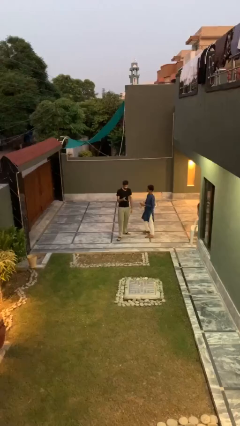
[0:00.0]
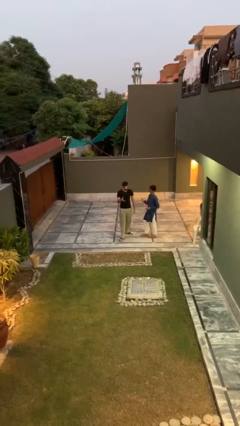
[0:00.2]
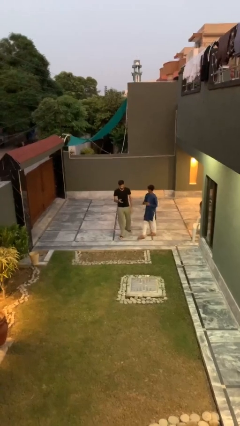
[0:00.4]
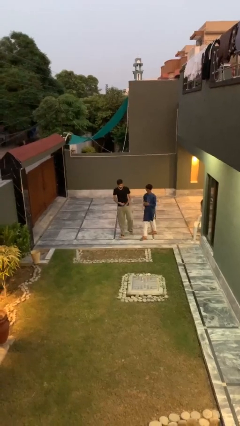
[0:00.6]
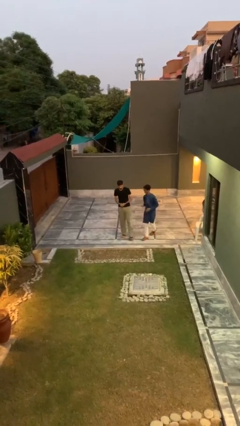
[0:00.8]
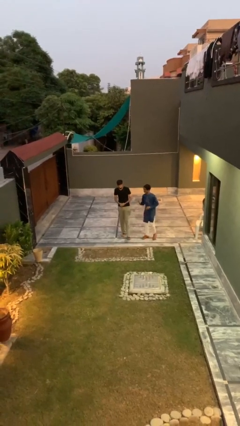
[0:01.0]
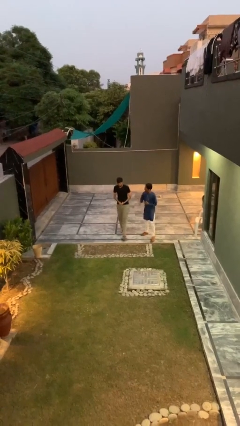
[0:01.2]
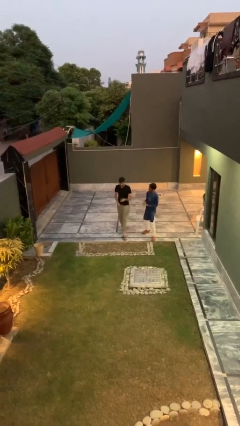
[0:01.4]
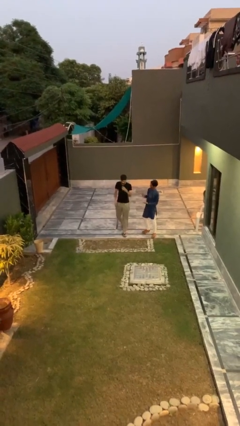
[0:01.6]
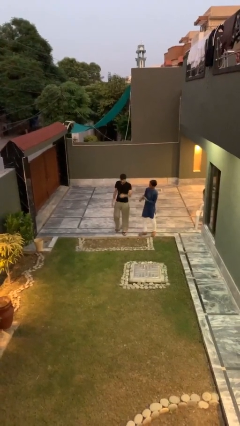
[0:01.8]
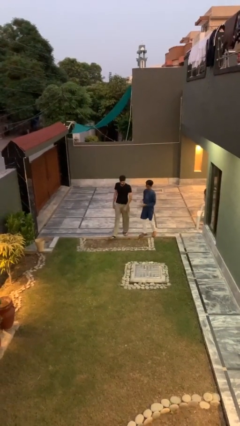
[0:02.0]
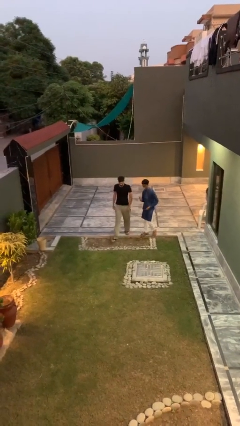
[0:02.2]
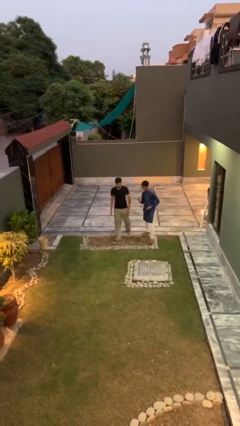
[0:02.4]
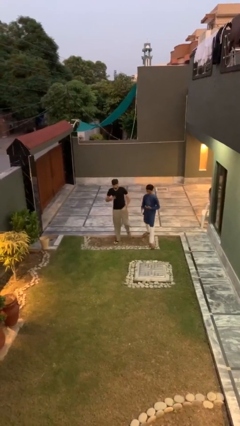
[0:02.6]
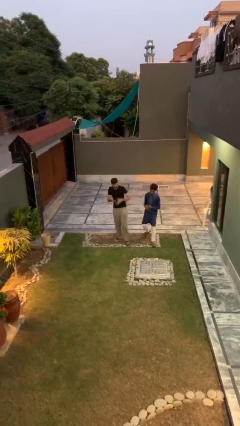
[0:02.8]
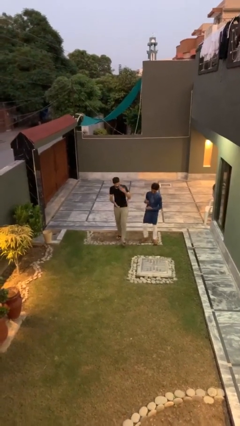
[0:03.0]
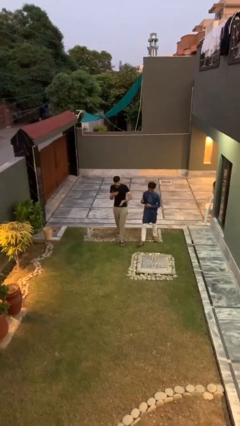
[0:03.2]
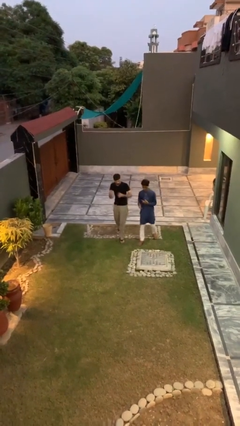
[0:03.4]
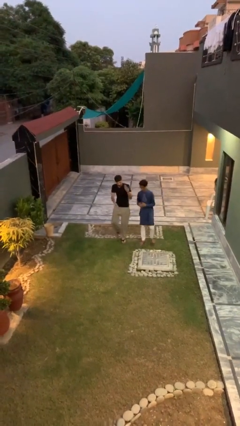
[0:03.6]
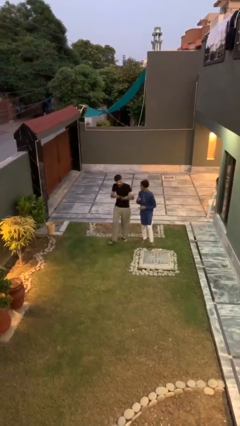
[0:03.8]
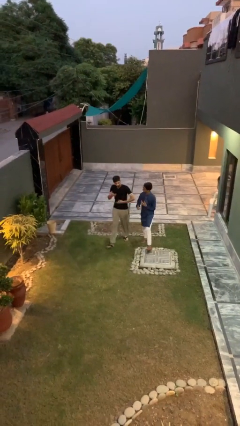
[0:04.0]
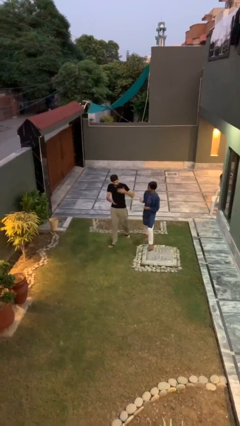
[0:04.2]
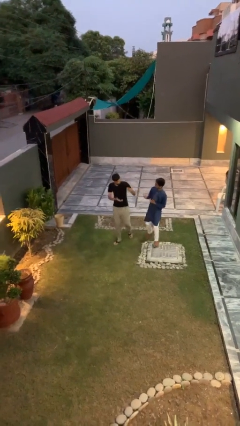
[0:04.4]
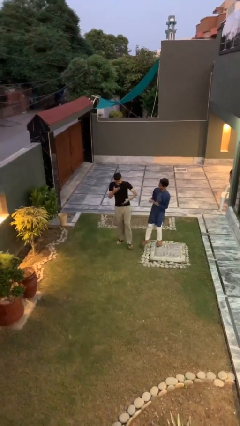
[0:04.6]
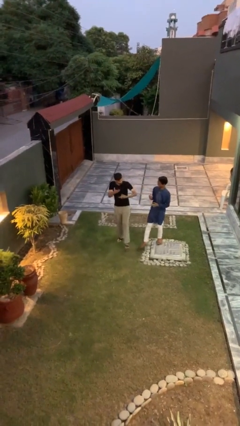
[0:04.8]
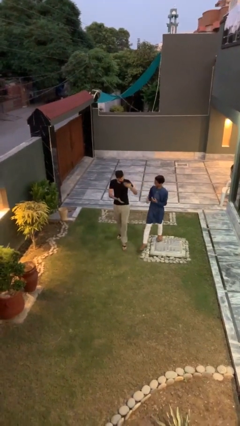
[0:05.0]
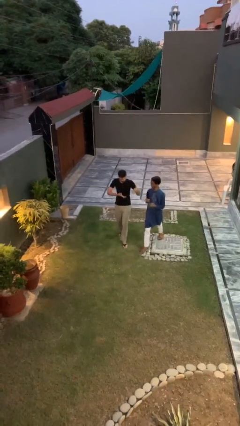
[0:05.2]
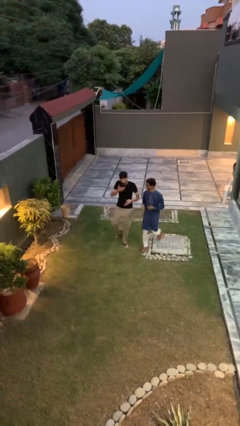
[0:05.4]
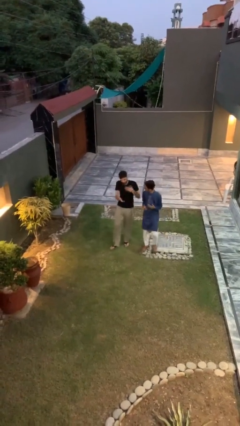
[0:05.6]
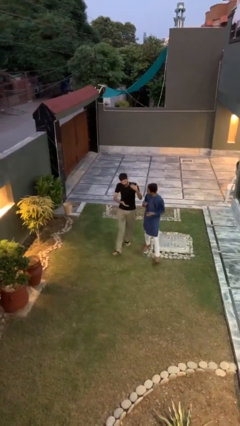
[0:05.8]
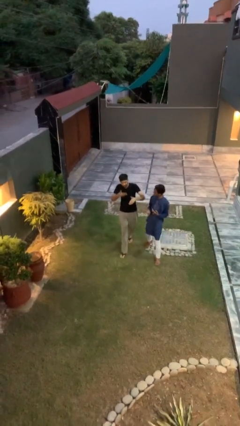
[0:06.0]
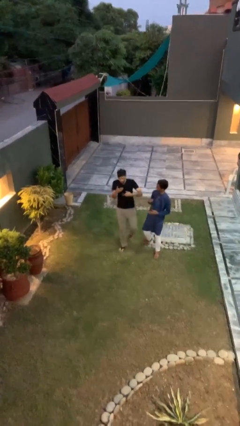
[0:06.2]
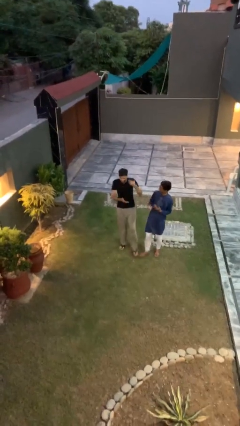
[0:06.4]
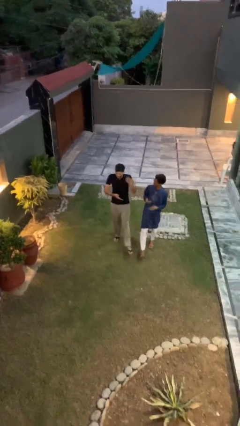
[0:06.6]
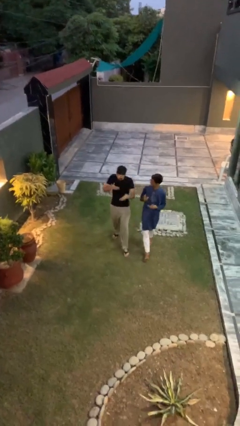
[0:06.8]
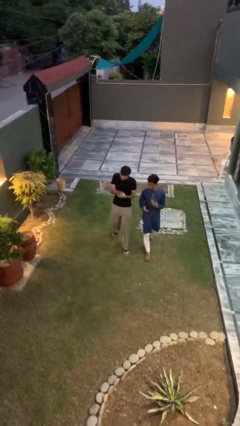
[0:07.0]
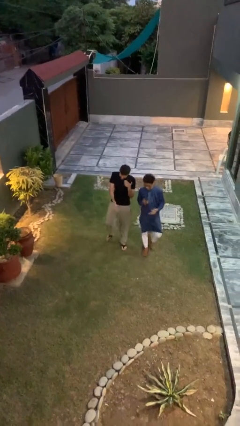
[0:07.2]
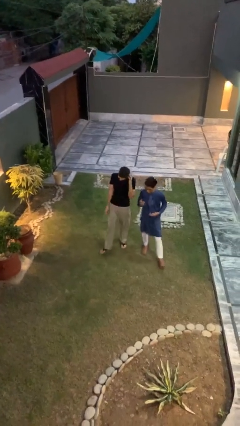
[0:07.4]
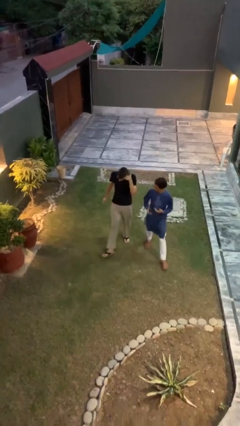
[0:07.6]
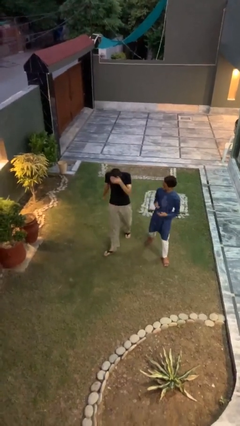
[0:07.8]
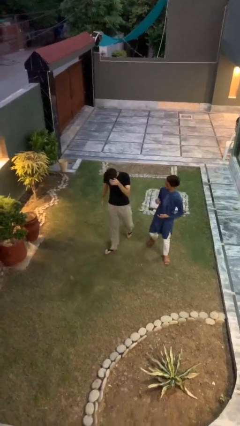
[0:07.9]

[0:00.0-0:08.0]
person talks to person

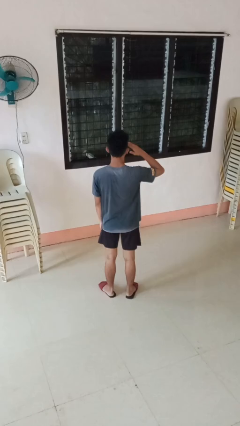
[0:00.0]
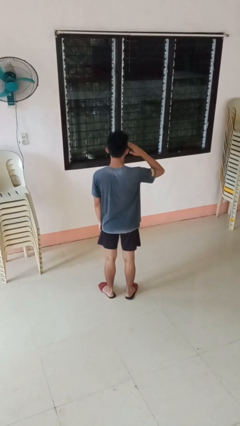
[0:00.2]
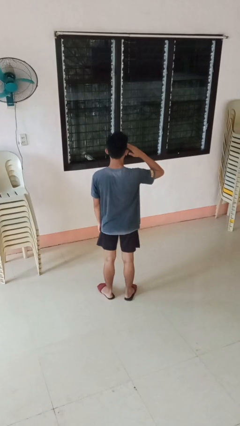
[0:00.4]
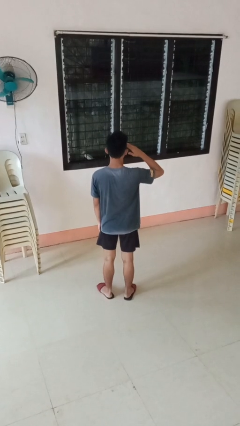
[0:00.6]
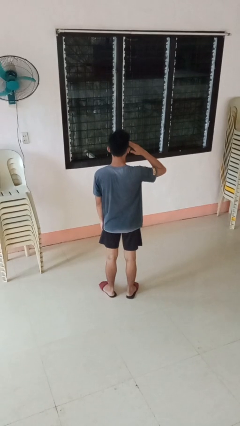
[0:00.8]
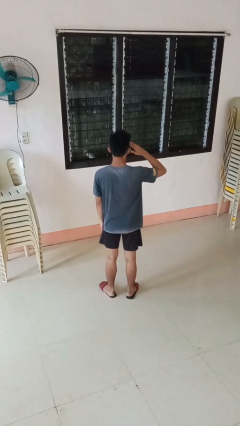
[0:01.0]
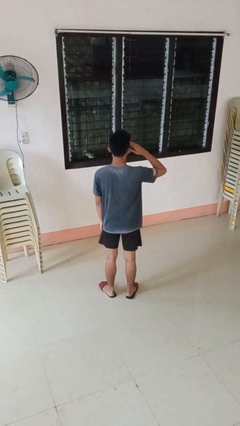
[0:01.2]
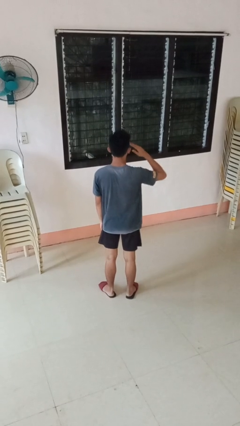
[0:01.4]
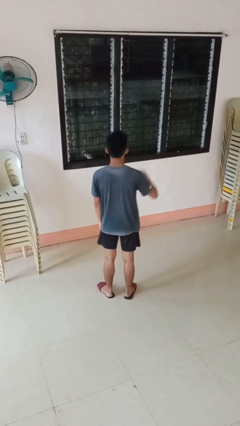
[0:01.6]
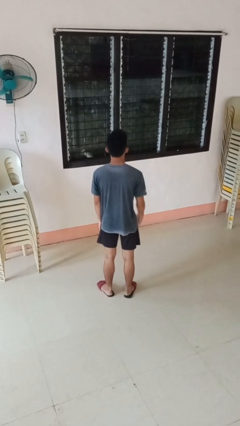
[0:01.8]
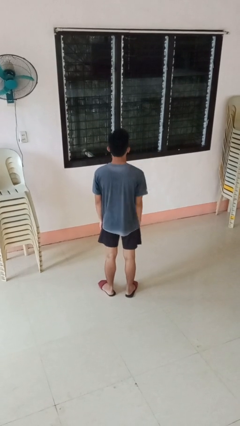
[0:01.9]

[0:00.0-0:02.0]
person salutes

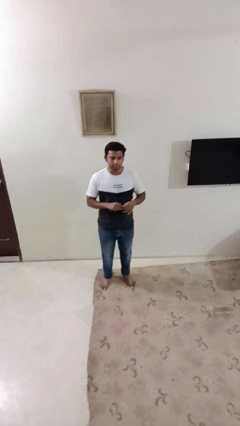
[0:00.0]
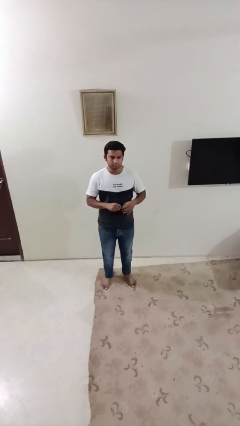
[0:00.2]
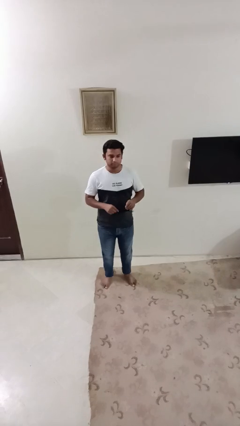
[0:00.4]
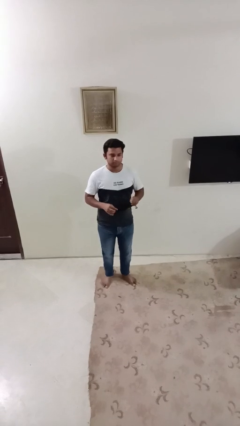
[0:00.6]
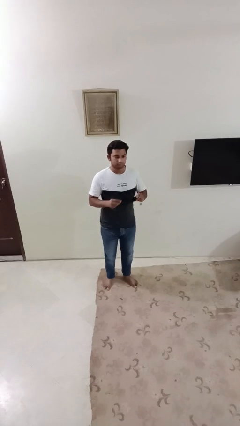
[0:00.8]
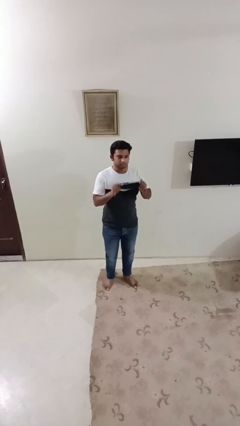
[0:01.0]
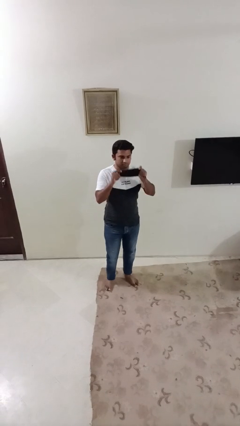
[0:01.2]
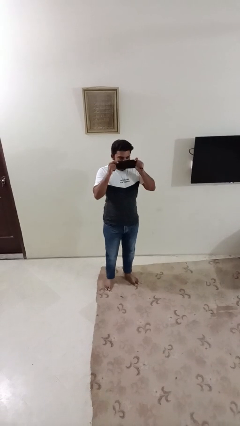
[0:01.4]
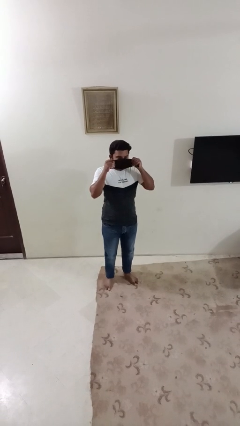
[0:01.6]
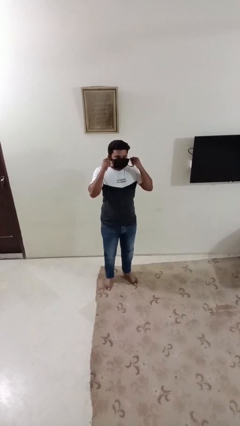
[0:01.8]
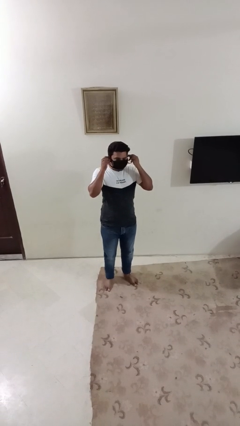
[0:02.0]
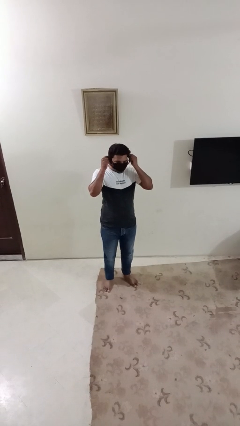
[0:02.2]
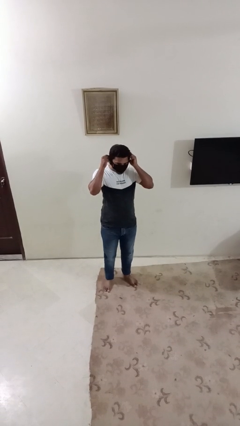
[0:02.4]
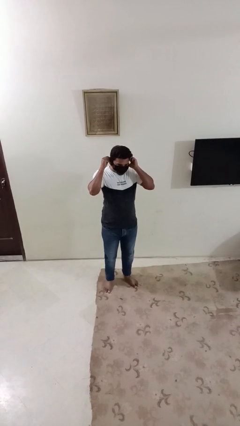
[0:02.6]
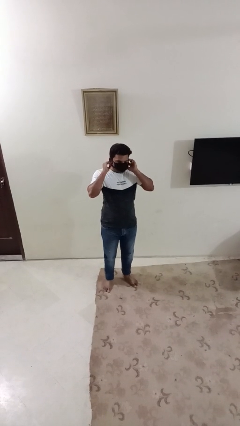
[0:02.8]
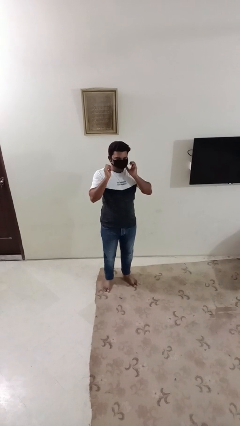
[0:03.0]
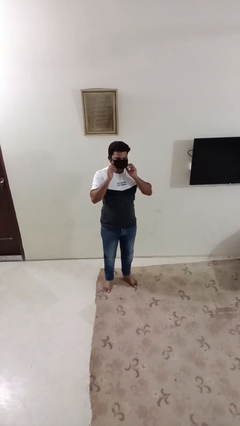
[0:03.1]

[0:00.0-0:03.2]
person puts on facemask

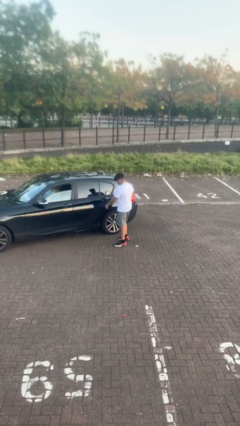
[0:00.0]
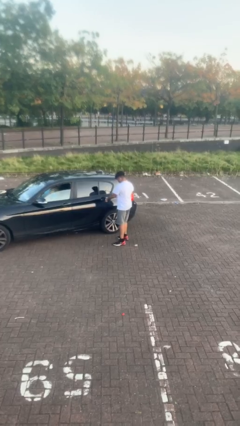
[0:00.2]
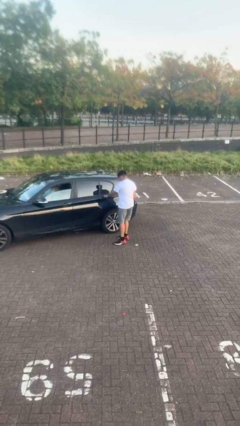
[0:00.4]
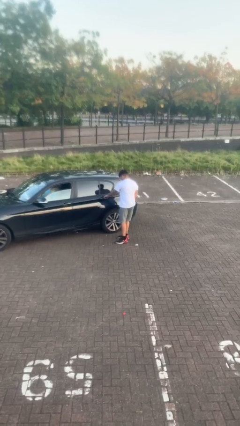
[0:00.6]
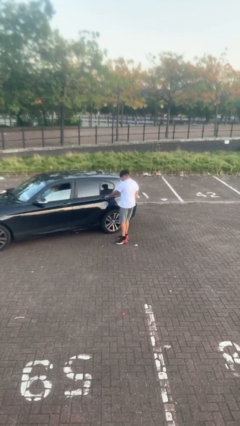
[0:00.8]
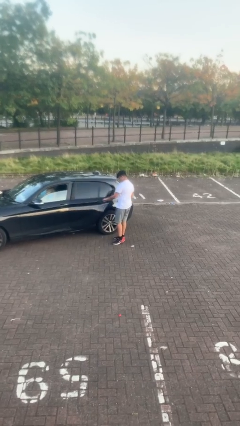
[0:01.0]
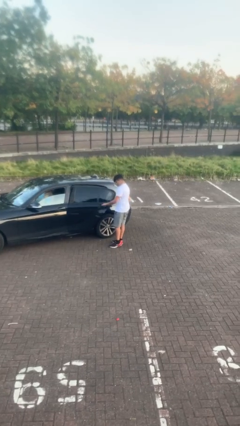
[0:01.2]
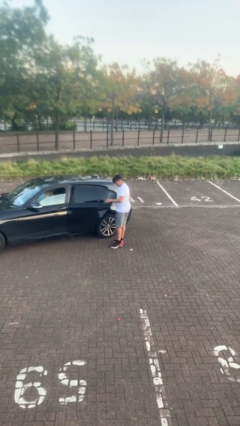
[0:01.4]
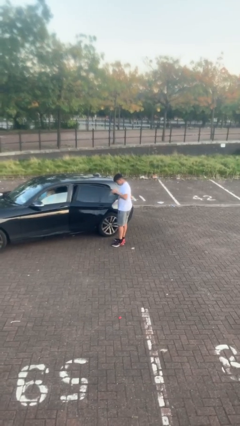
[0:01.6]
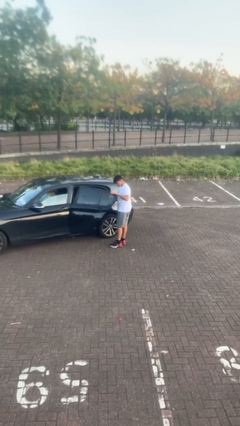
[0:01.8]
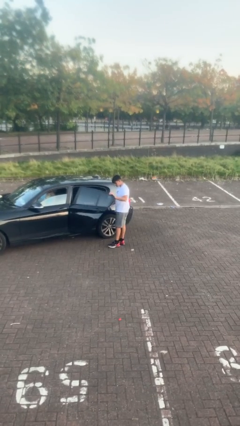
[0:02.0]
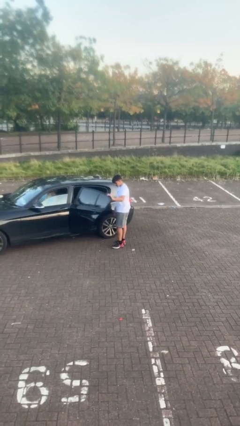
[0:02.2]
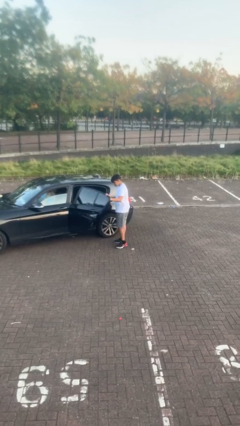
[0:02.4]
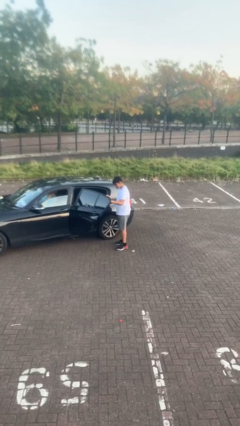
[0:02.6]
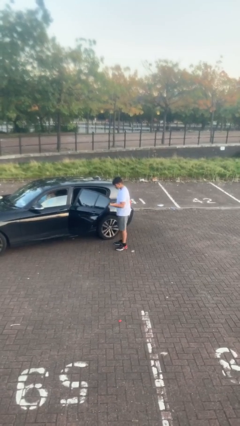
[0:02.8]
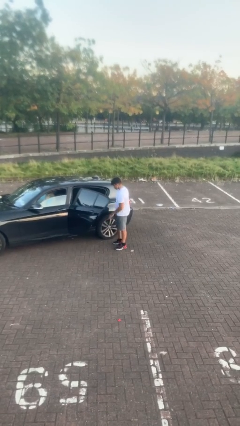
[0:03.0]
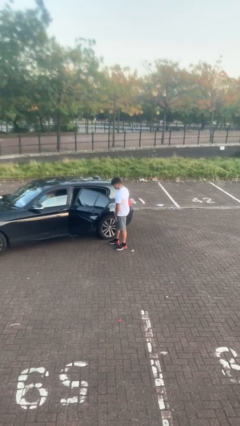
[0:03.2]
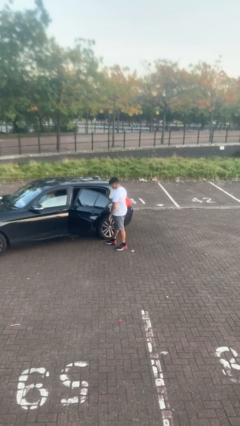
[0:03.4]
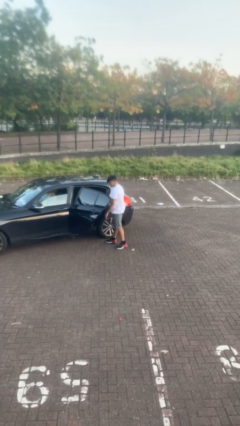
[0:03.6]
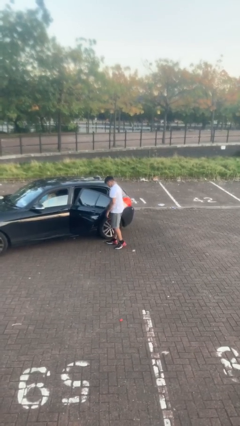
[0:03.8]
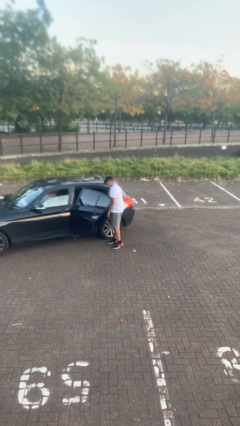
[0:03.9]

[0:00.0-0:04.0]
person opens car door

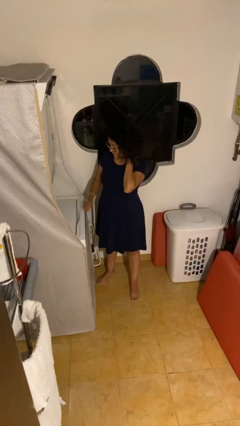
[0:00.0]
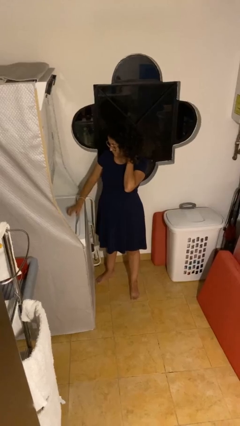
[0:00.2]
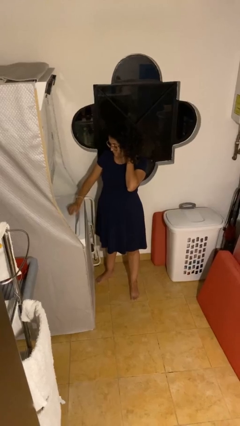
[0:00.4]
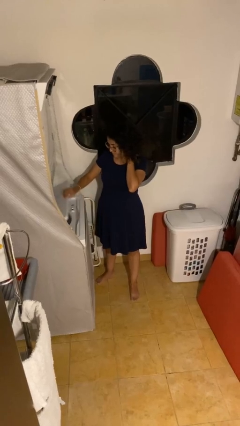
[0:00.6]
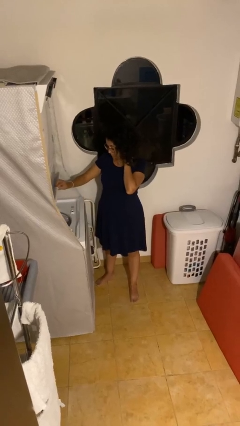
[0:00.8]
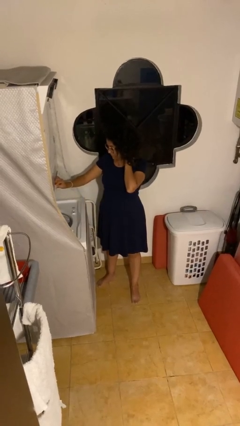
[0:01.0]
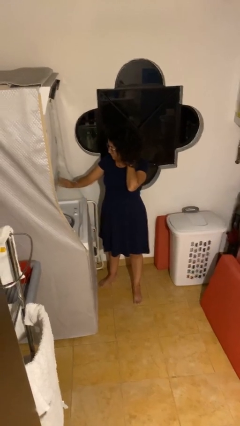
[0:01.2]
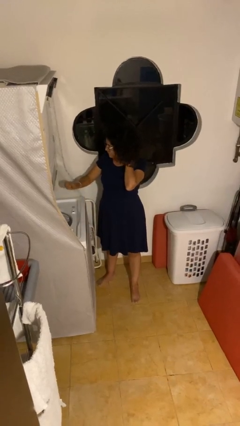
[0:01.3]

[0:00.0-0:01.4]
person opens clothes washer
